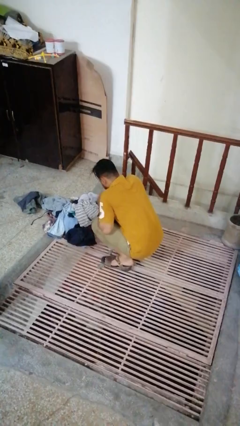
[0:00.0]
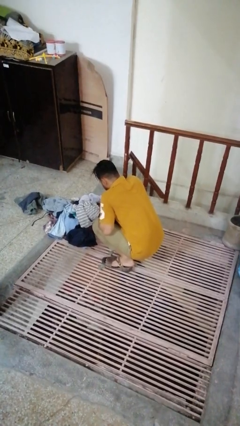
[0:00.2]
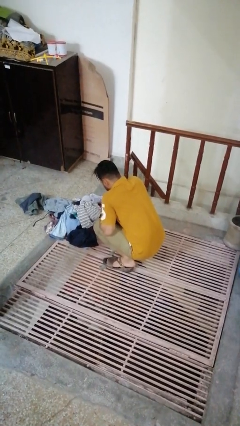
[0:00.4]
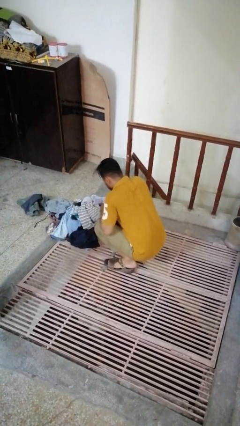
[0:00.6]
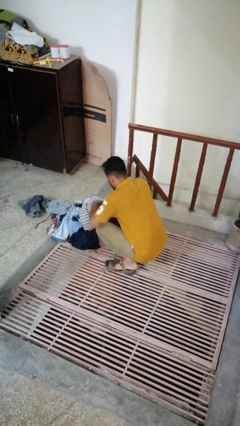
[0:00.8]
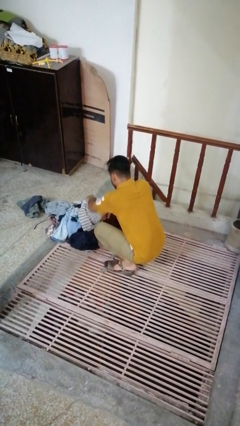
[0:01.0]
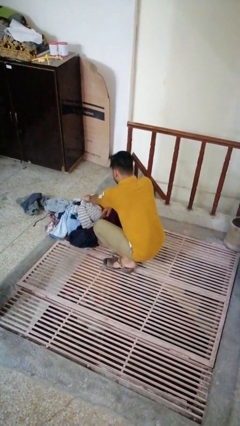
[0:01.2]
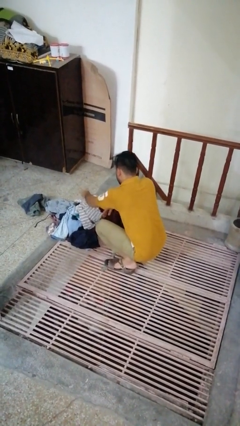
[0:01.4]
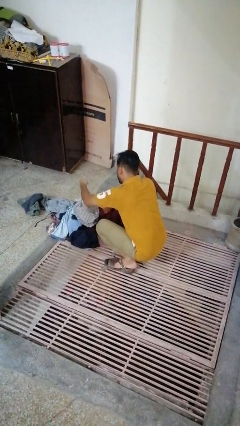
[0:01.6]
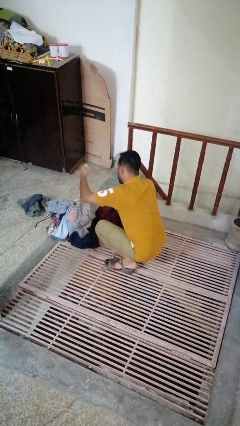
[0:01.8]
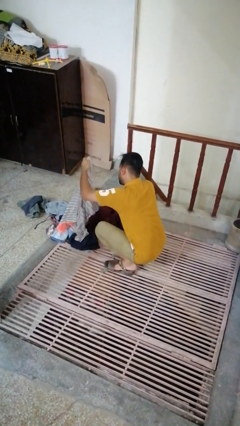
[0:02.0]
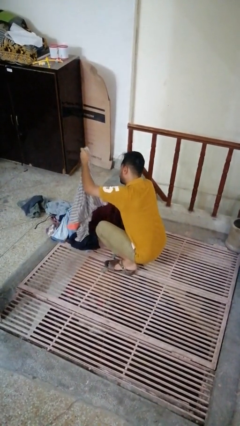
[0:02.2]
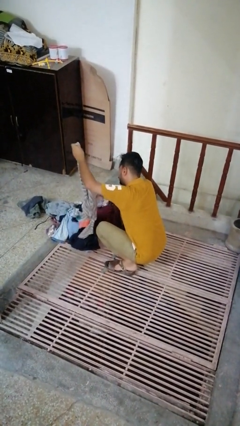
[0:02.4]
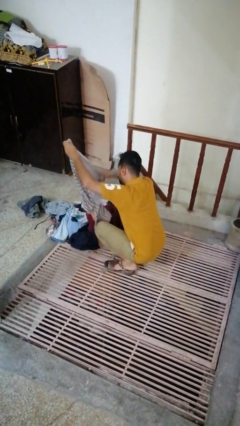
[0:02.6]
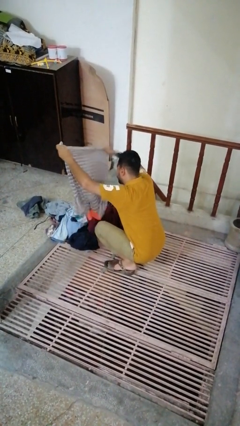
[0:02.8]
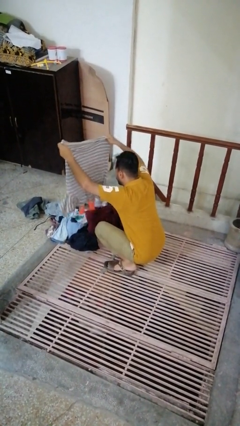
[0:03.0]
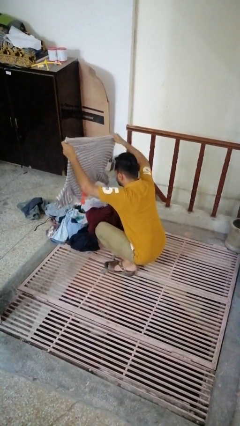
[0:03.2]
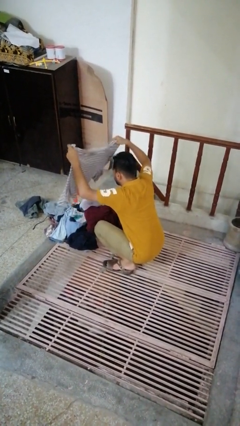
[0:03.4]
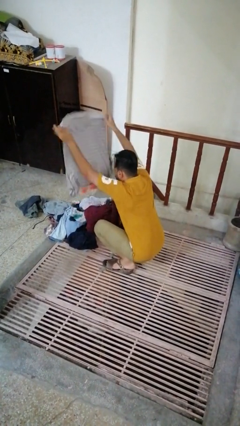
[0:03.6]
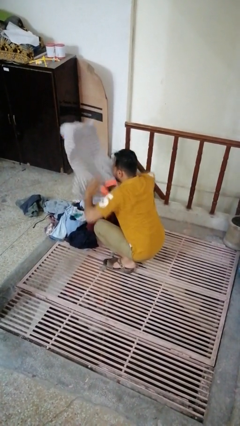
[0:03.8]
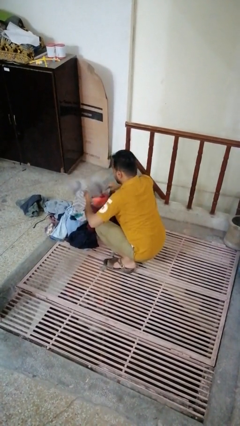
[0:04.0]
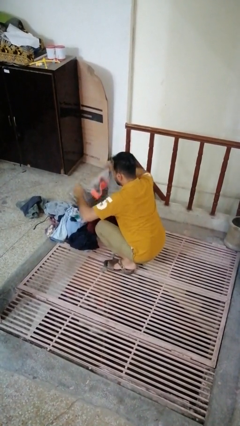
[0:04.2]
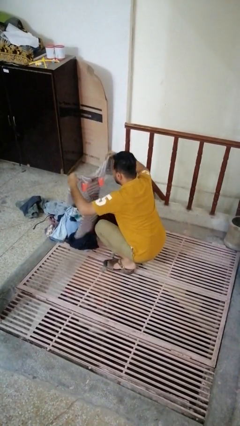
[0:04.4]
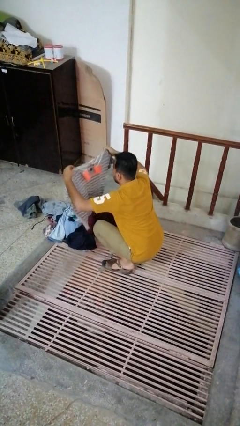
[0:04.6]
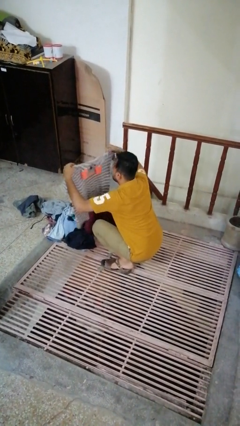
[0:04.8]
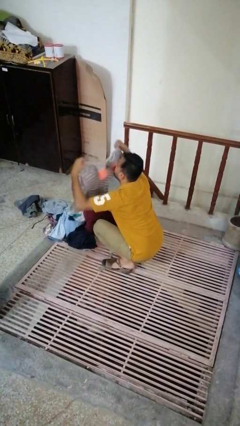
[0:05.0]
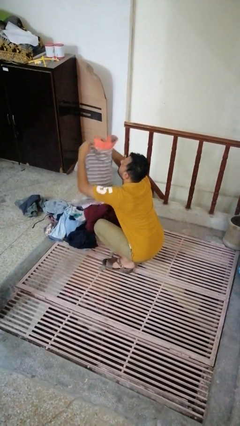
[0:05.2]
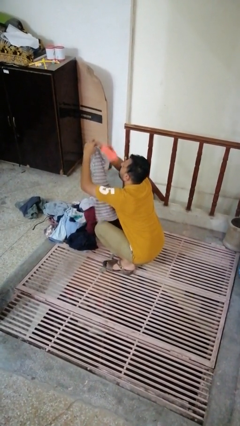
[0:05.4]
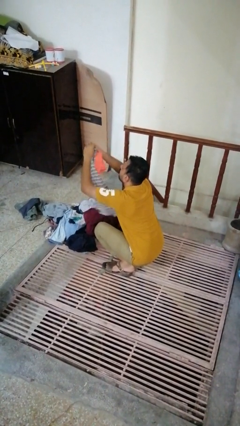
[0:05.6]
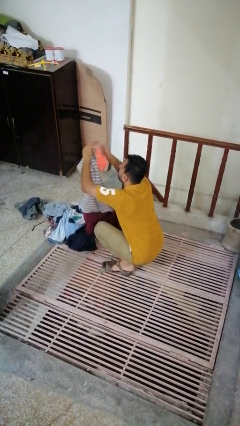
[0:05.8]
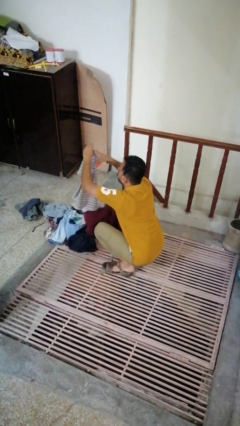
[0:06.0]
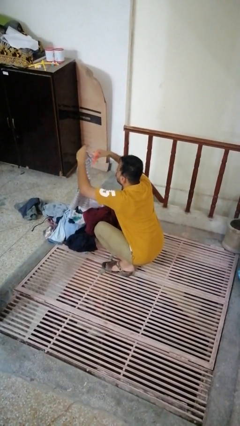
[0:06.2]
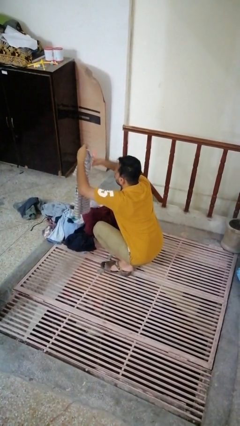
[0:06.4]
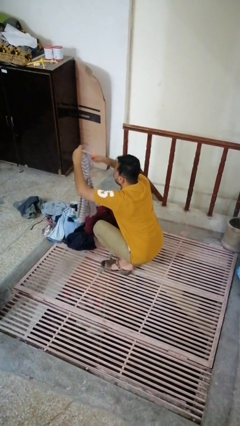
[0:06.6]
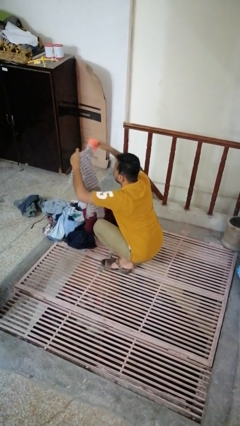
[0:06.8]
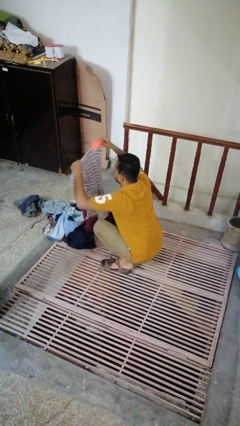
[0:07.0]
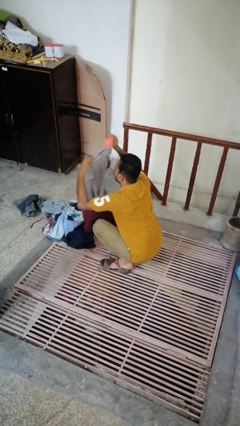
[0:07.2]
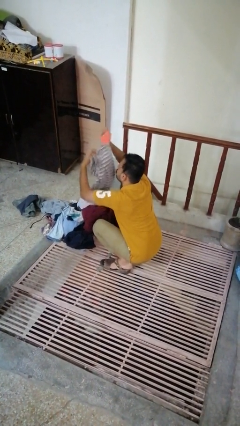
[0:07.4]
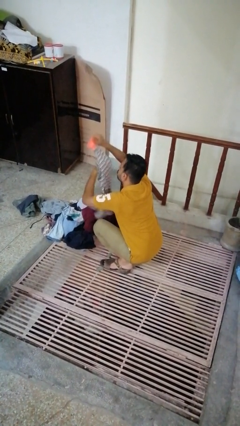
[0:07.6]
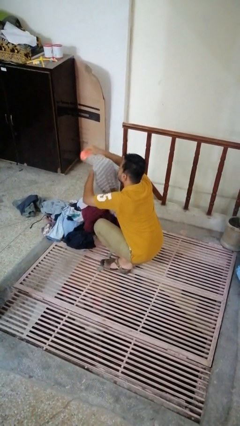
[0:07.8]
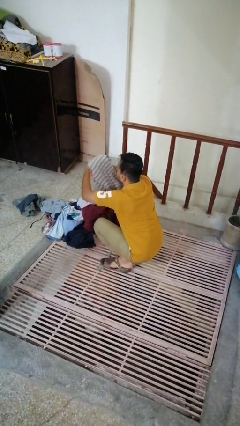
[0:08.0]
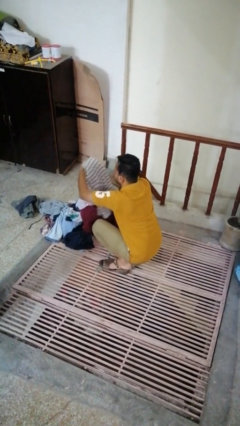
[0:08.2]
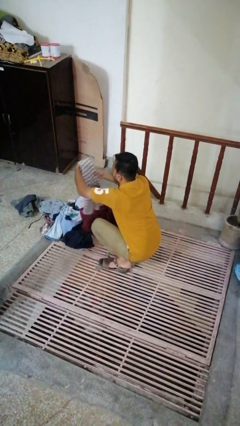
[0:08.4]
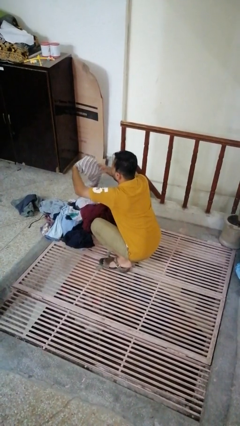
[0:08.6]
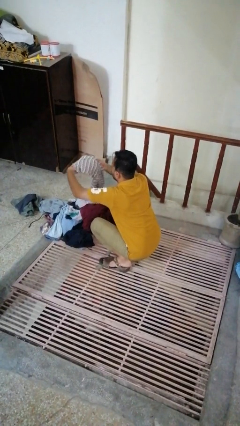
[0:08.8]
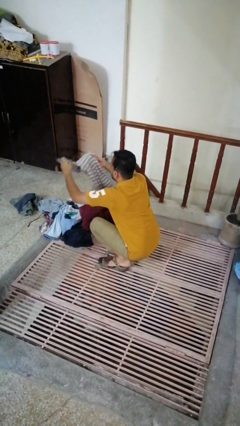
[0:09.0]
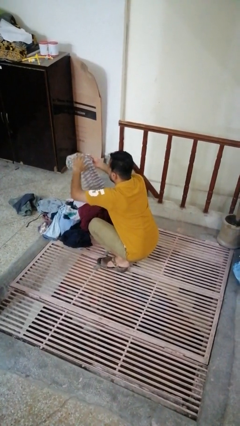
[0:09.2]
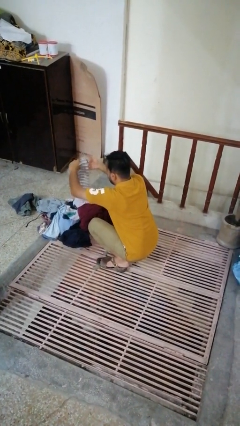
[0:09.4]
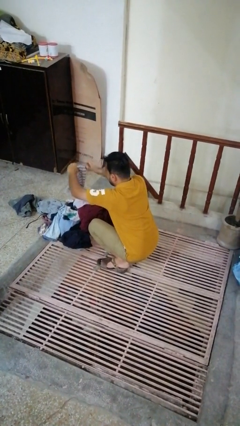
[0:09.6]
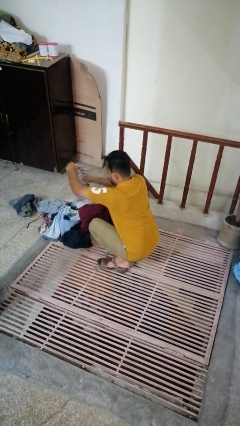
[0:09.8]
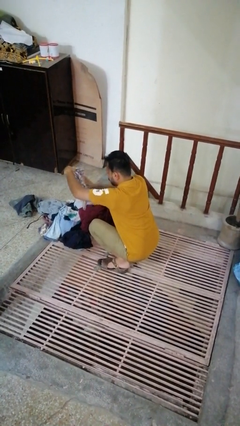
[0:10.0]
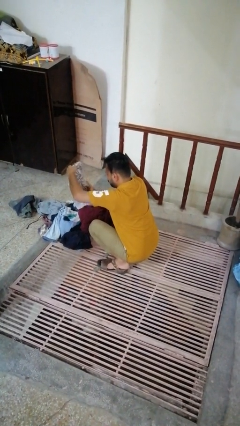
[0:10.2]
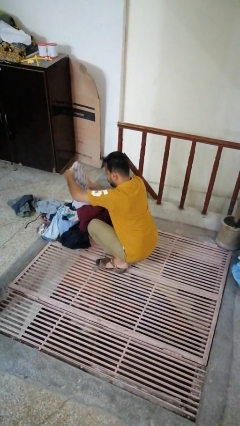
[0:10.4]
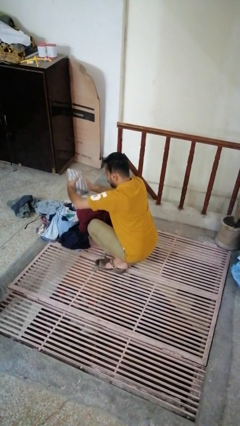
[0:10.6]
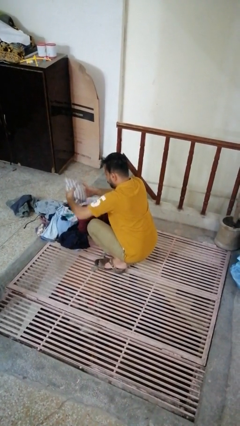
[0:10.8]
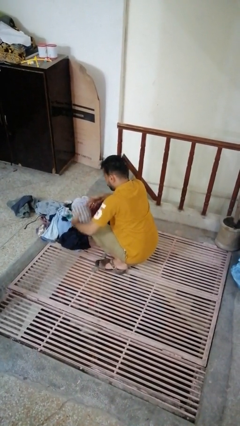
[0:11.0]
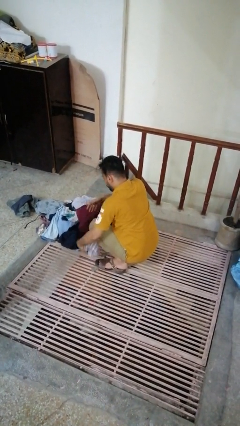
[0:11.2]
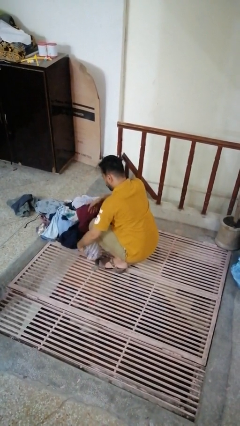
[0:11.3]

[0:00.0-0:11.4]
person folds shirt

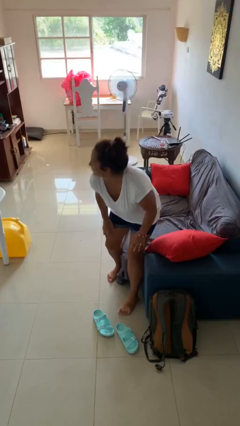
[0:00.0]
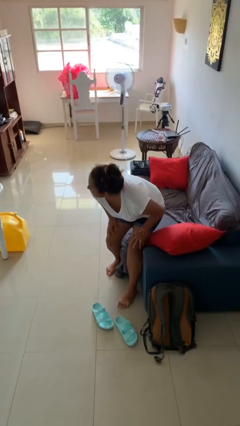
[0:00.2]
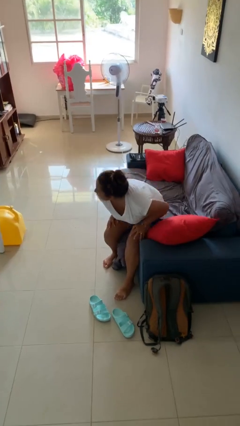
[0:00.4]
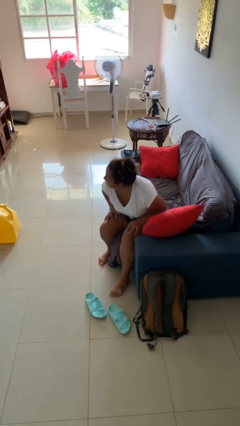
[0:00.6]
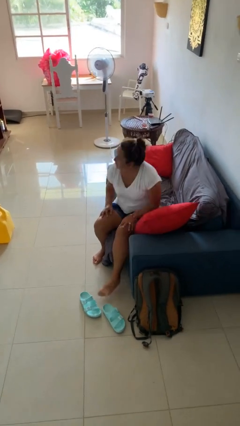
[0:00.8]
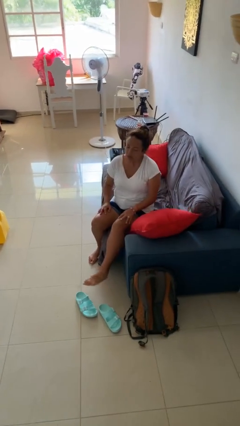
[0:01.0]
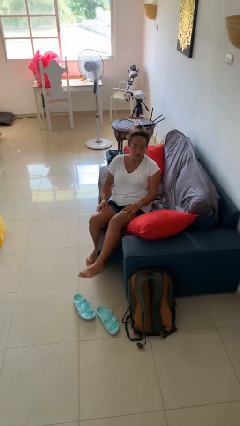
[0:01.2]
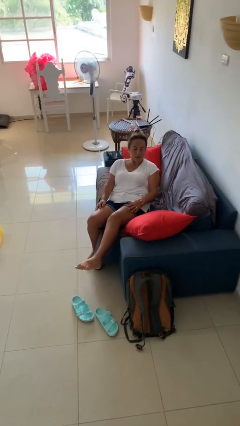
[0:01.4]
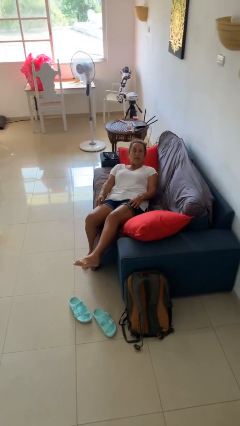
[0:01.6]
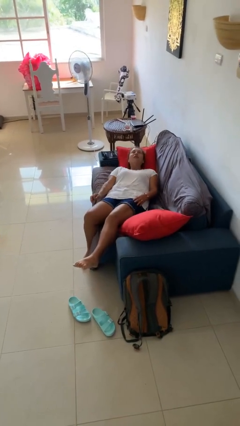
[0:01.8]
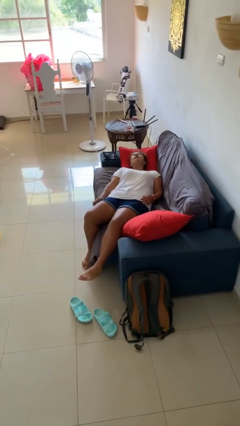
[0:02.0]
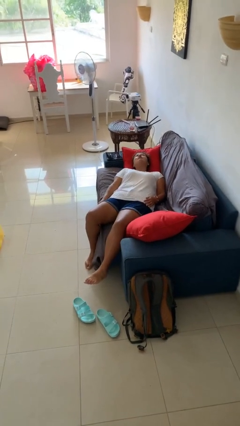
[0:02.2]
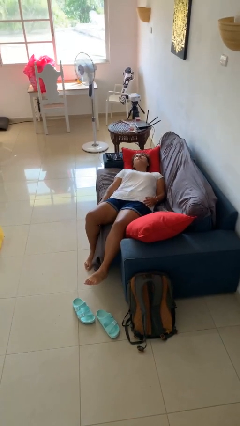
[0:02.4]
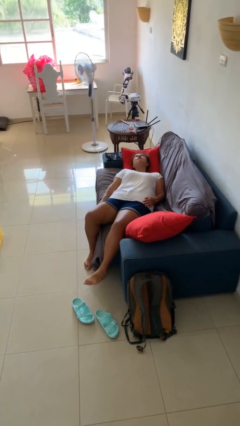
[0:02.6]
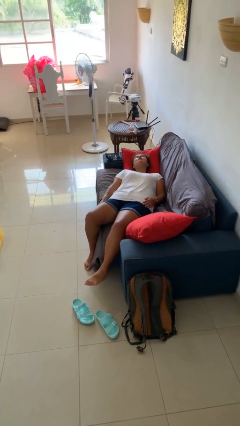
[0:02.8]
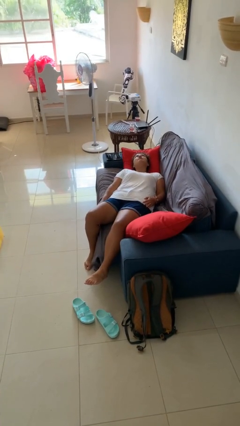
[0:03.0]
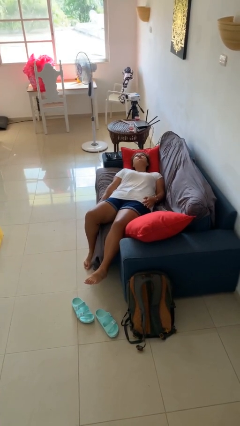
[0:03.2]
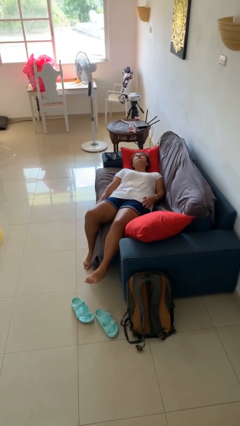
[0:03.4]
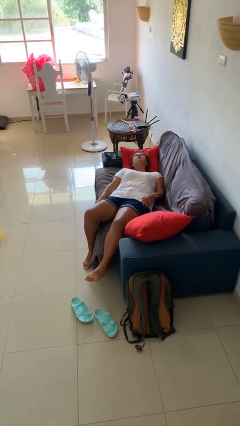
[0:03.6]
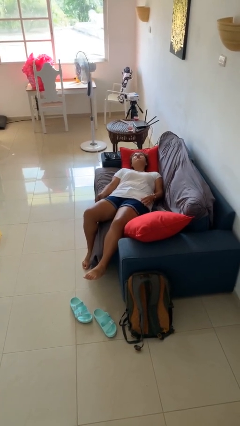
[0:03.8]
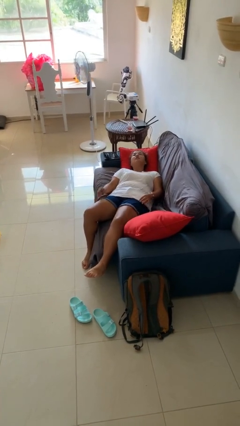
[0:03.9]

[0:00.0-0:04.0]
person lies down on couch

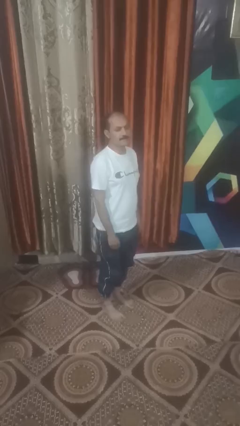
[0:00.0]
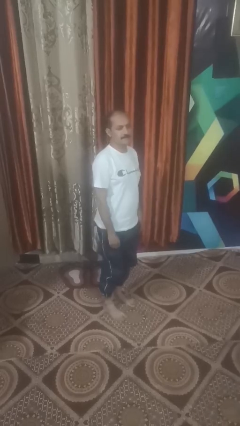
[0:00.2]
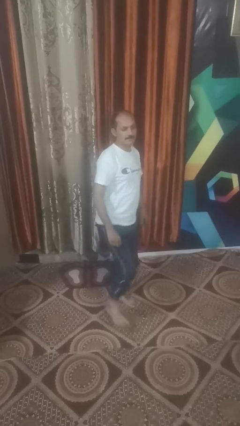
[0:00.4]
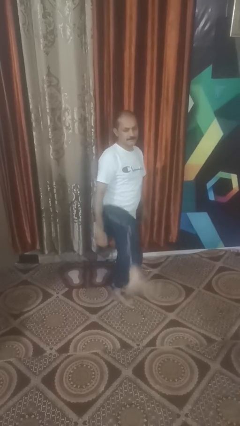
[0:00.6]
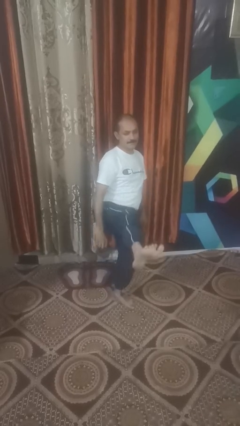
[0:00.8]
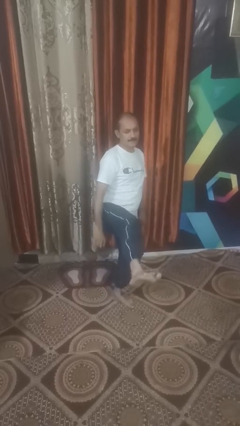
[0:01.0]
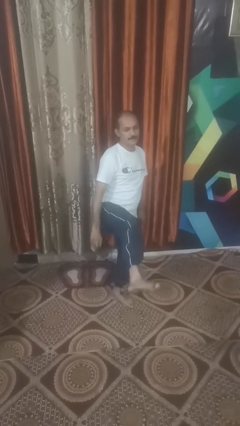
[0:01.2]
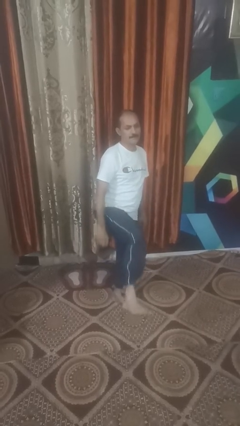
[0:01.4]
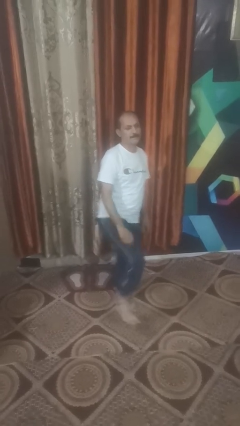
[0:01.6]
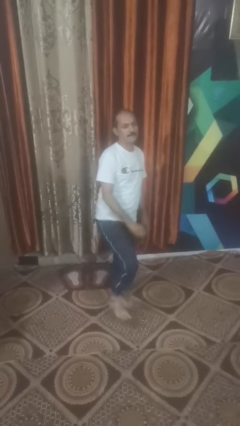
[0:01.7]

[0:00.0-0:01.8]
person karate kicks

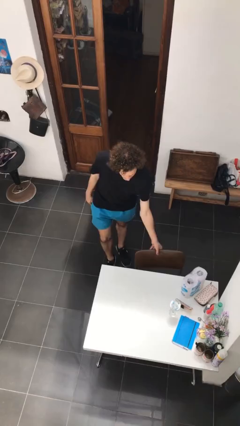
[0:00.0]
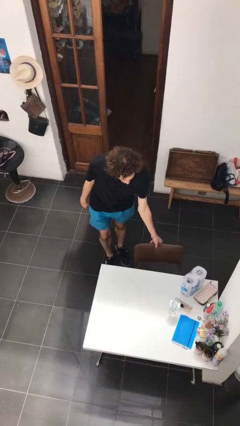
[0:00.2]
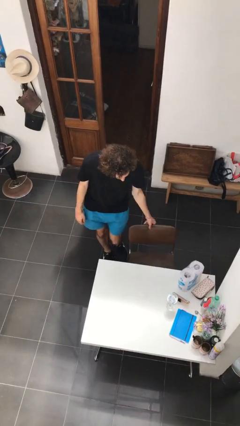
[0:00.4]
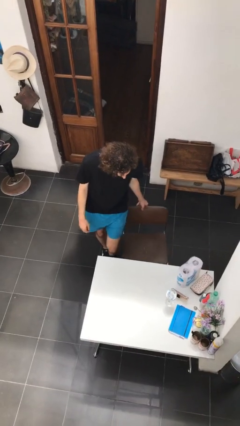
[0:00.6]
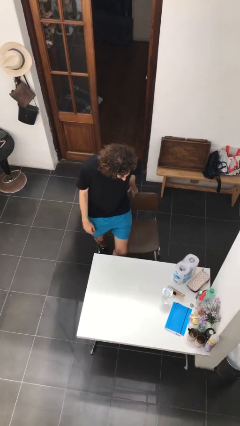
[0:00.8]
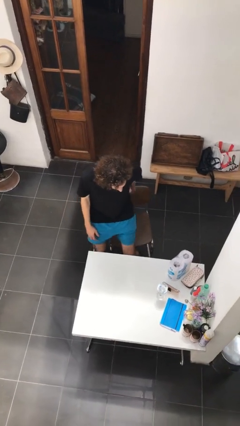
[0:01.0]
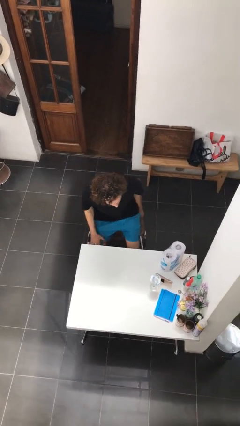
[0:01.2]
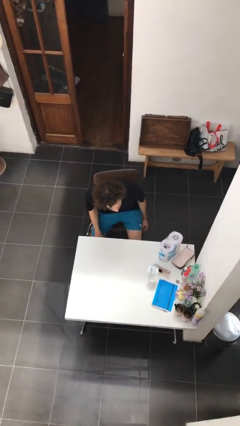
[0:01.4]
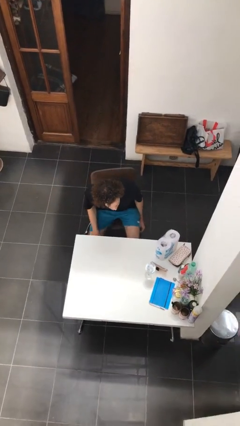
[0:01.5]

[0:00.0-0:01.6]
person sits down
